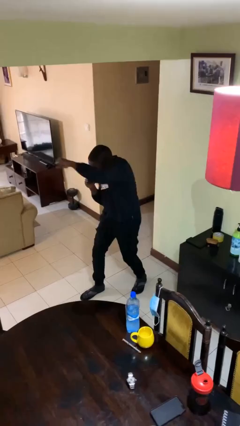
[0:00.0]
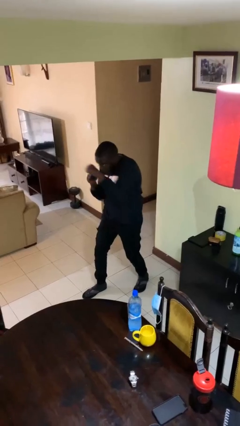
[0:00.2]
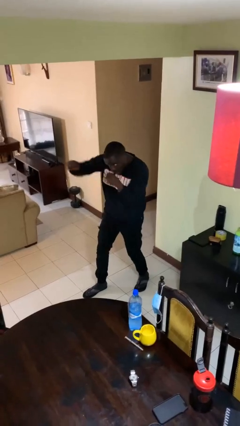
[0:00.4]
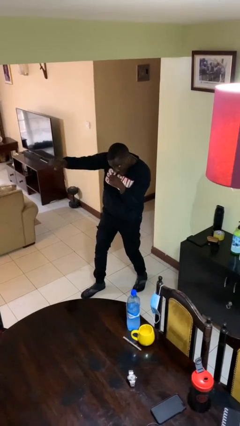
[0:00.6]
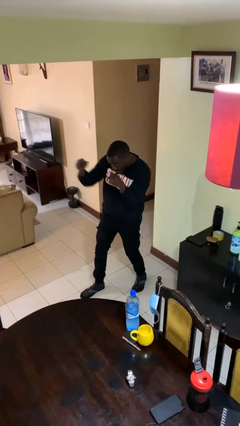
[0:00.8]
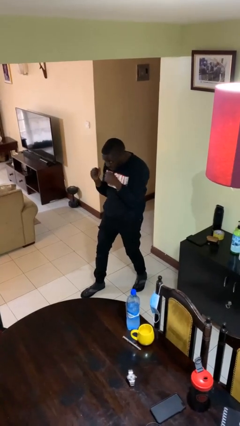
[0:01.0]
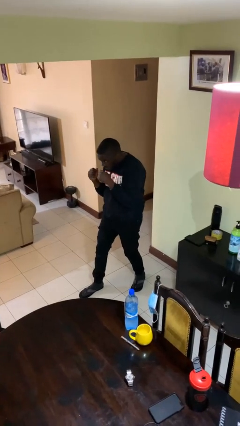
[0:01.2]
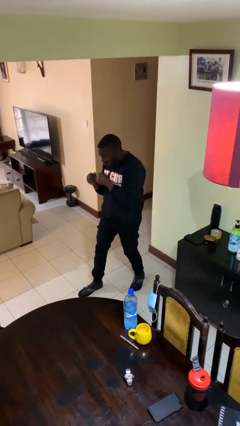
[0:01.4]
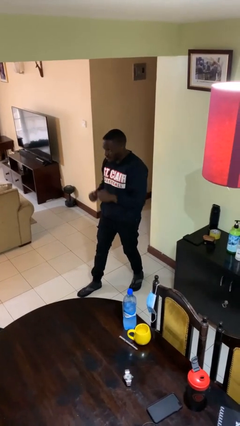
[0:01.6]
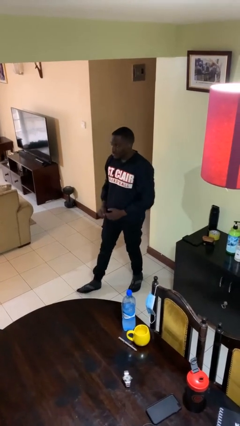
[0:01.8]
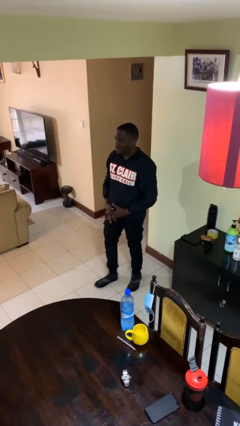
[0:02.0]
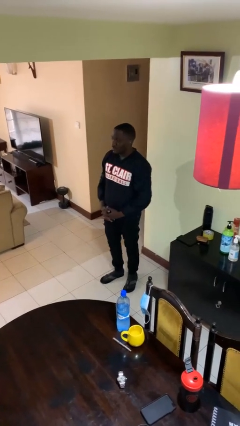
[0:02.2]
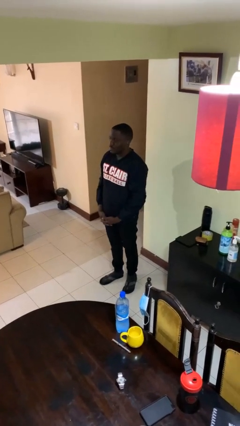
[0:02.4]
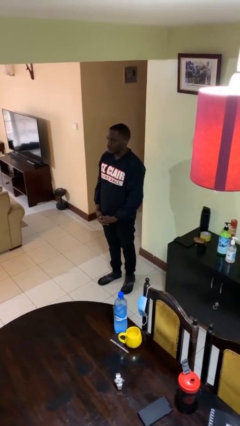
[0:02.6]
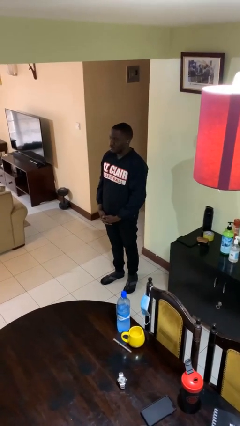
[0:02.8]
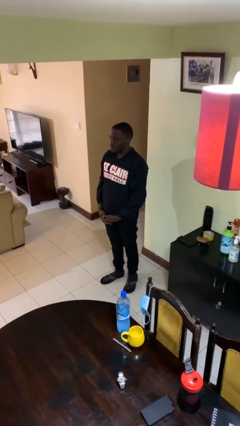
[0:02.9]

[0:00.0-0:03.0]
person punches

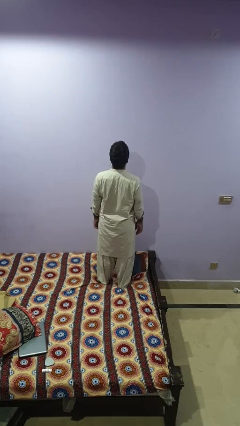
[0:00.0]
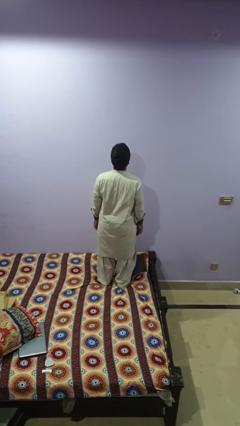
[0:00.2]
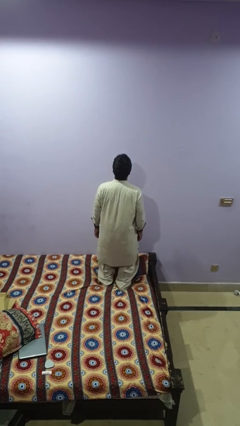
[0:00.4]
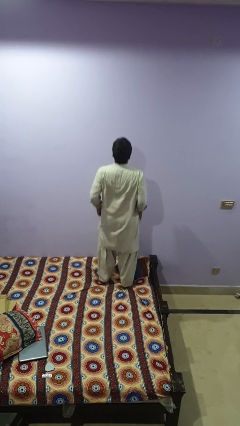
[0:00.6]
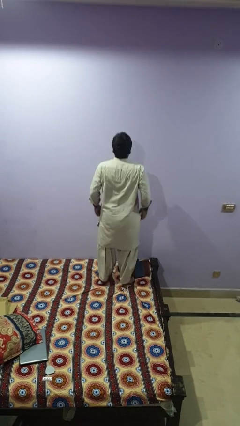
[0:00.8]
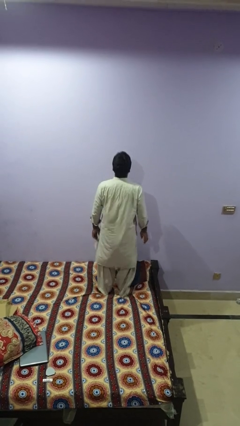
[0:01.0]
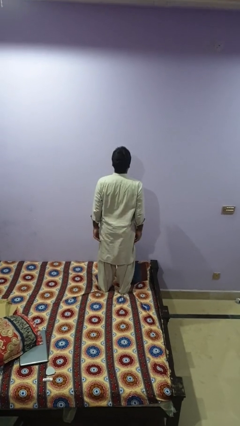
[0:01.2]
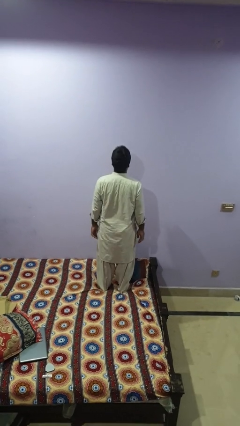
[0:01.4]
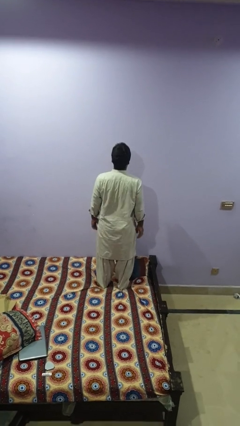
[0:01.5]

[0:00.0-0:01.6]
person jumps on bed

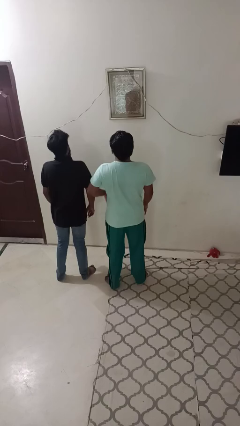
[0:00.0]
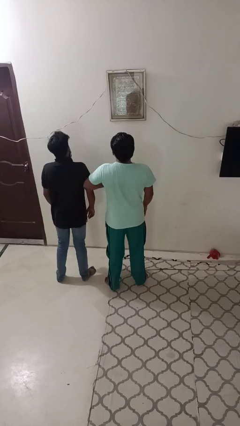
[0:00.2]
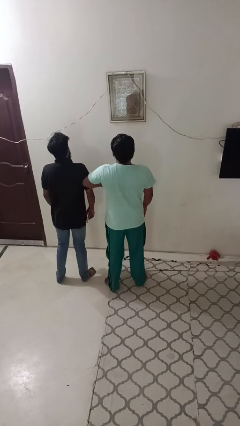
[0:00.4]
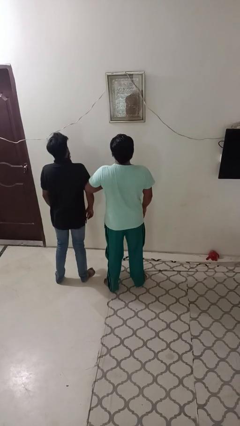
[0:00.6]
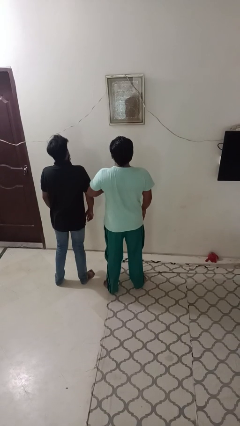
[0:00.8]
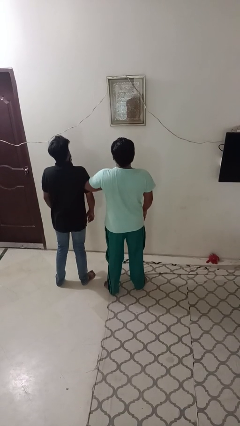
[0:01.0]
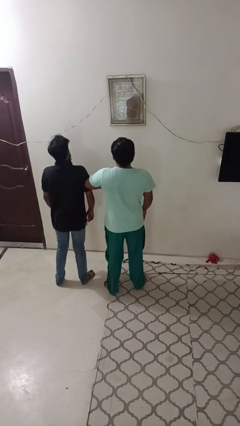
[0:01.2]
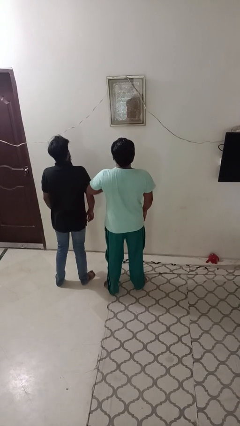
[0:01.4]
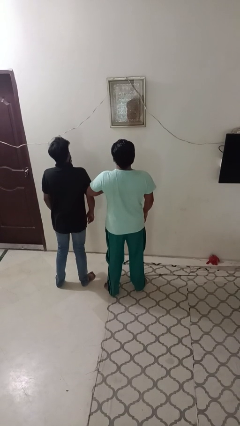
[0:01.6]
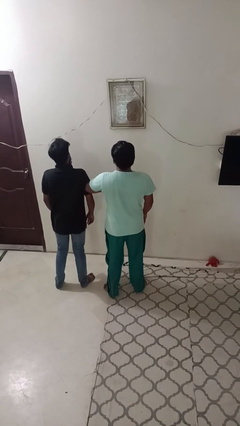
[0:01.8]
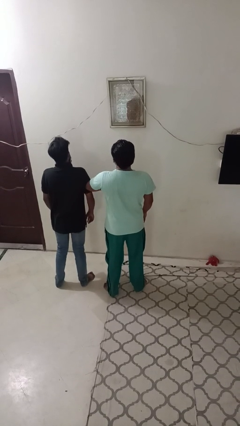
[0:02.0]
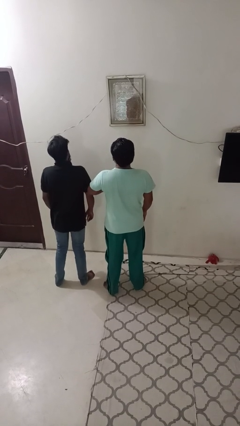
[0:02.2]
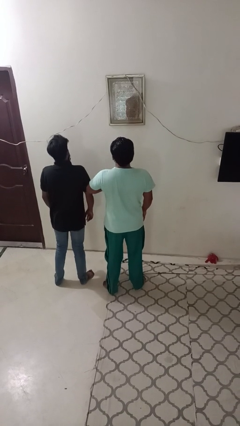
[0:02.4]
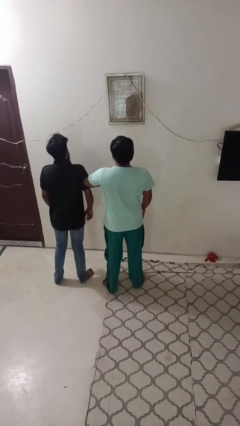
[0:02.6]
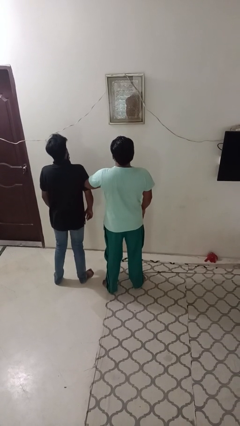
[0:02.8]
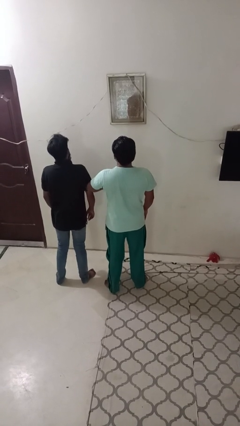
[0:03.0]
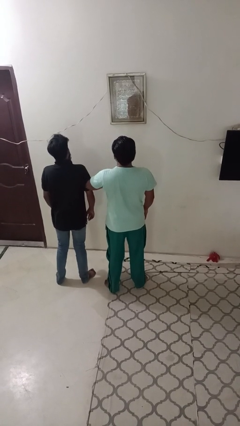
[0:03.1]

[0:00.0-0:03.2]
person nudges person with elbow

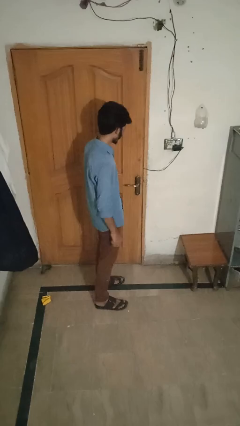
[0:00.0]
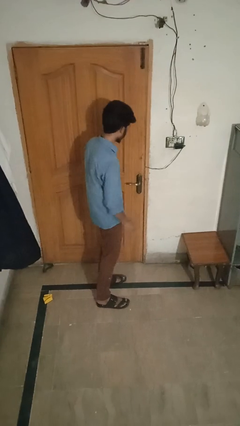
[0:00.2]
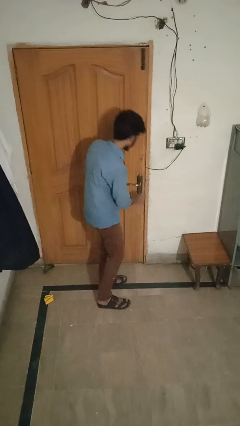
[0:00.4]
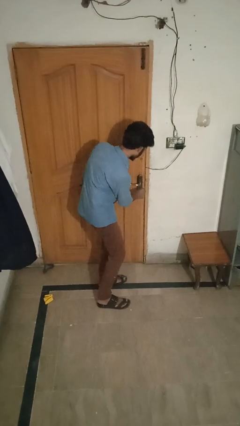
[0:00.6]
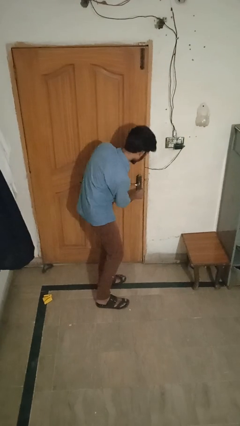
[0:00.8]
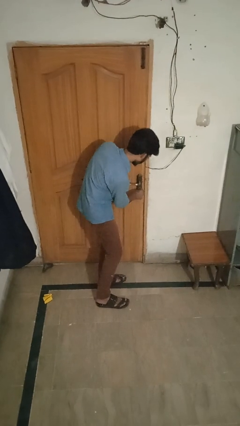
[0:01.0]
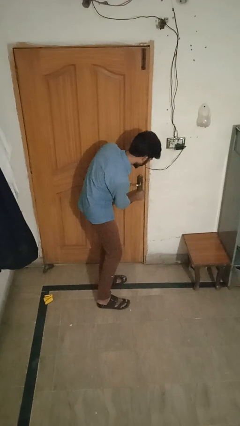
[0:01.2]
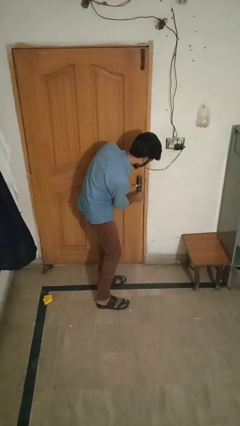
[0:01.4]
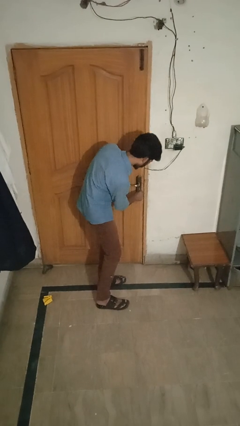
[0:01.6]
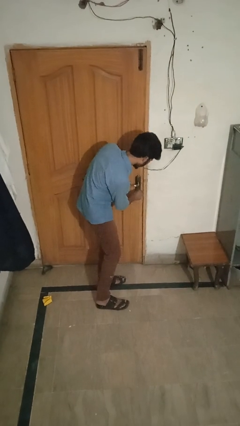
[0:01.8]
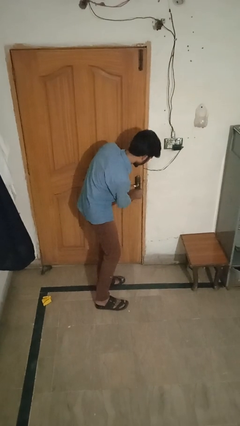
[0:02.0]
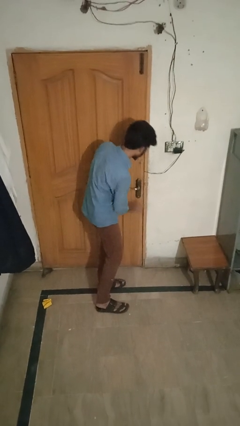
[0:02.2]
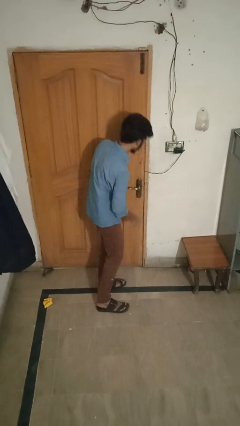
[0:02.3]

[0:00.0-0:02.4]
person locks door with keys

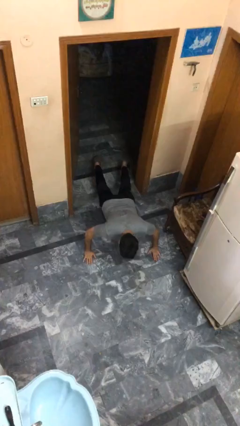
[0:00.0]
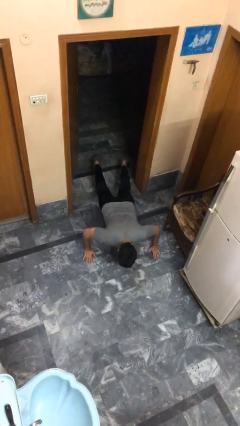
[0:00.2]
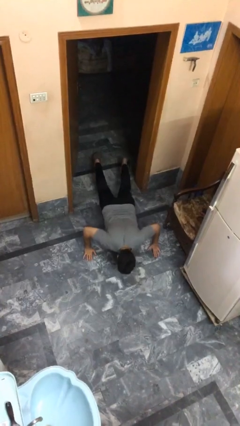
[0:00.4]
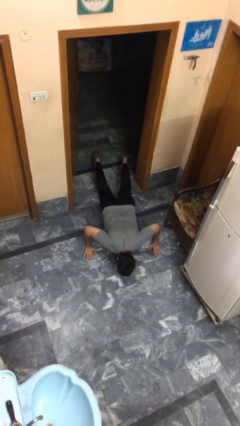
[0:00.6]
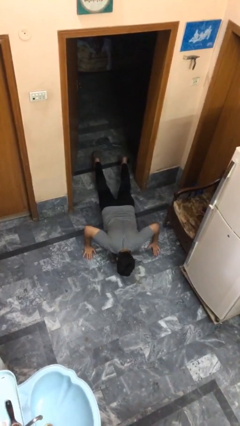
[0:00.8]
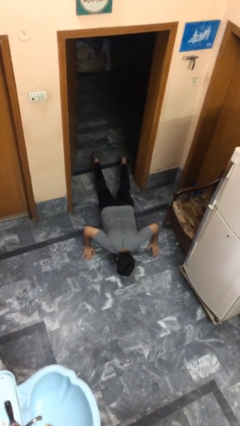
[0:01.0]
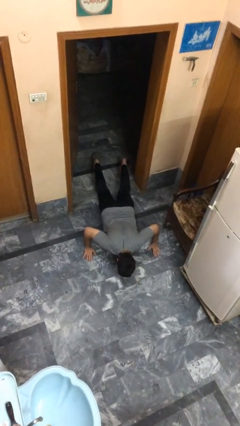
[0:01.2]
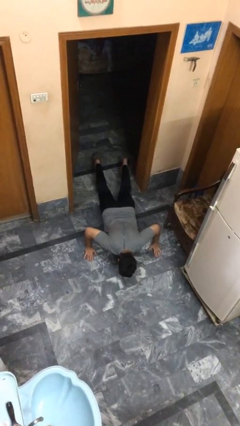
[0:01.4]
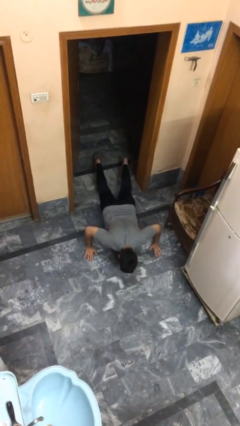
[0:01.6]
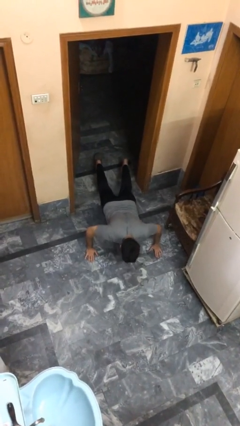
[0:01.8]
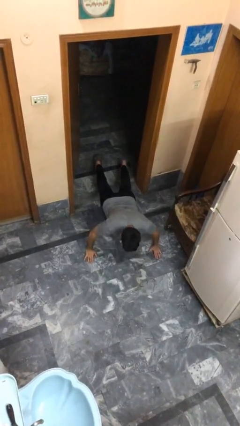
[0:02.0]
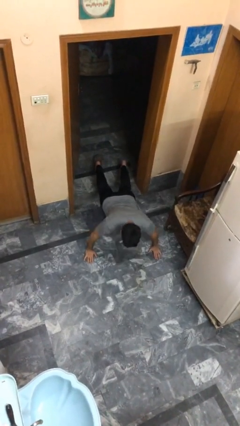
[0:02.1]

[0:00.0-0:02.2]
person exercises with pushup

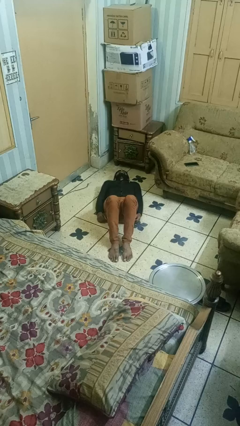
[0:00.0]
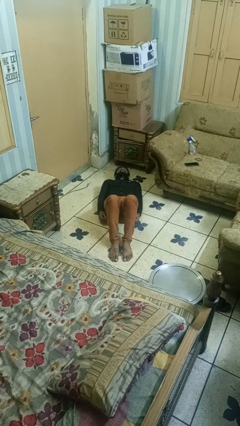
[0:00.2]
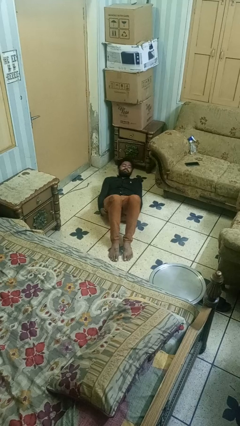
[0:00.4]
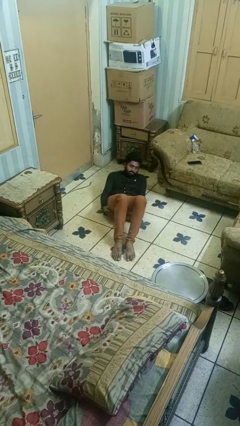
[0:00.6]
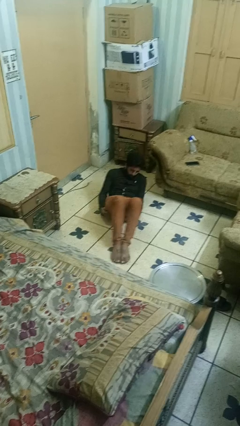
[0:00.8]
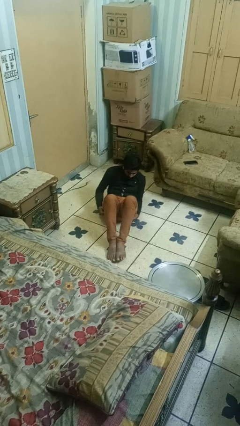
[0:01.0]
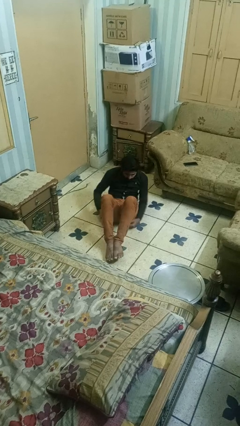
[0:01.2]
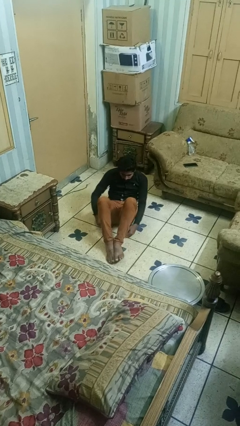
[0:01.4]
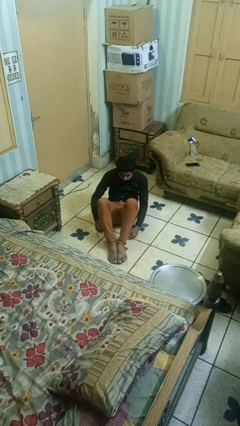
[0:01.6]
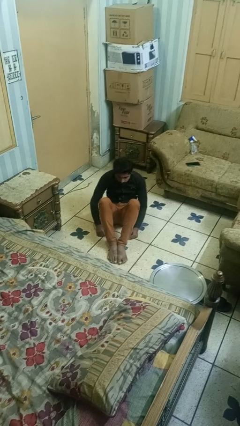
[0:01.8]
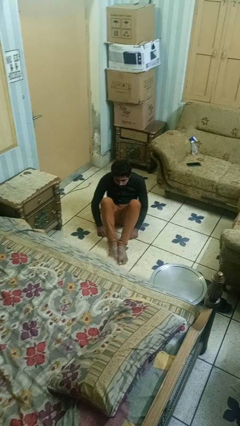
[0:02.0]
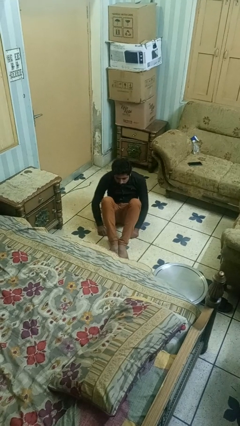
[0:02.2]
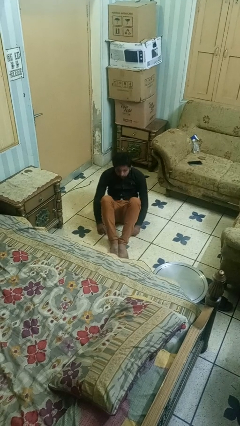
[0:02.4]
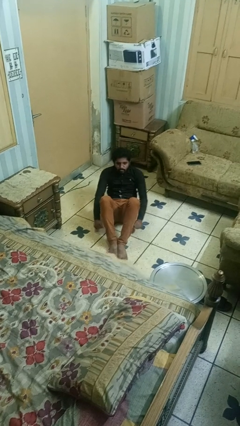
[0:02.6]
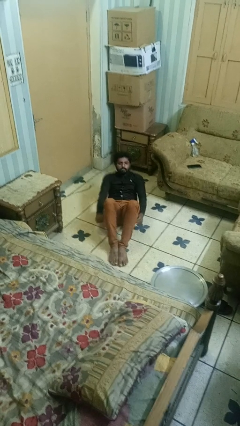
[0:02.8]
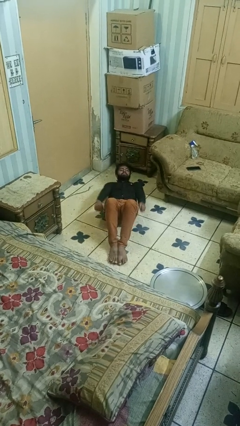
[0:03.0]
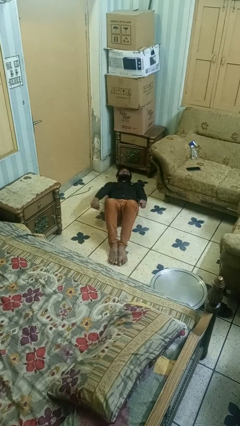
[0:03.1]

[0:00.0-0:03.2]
person exercises with situp

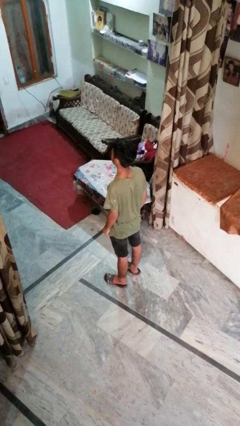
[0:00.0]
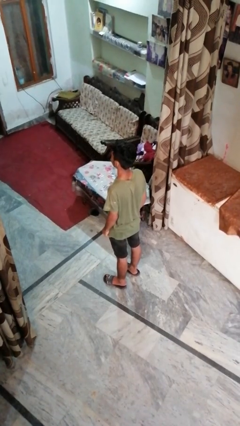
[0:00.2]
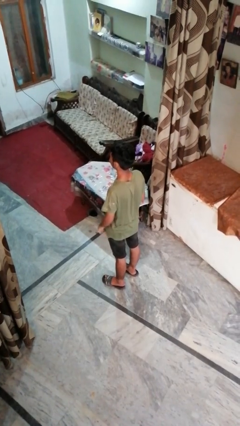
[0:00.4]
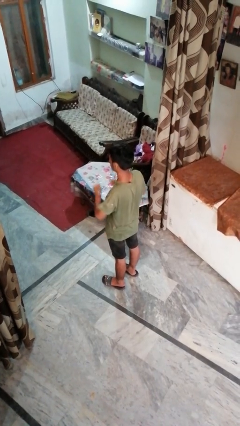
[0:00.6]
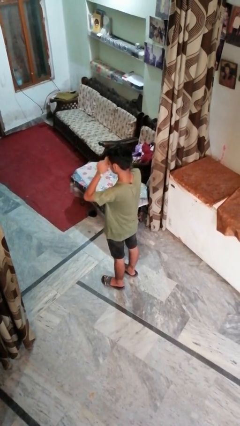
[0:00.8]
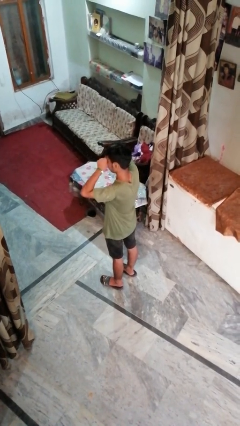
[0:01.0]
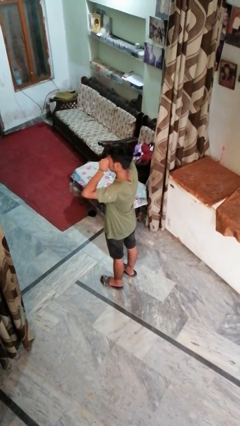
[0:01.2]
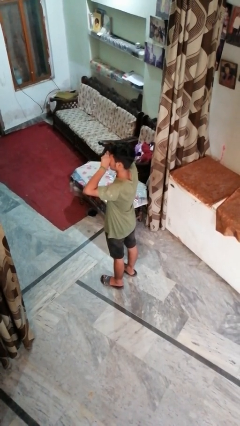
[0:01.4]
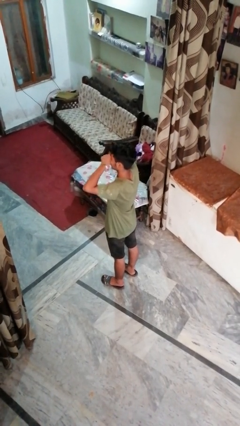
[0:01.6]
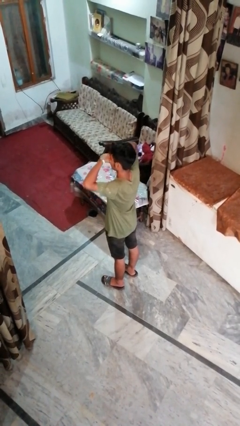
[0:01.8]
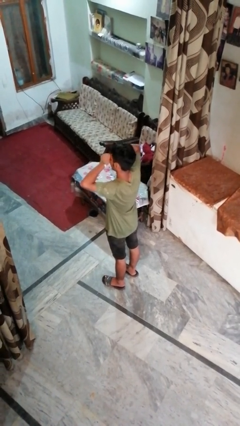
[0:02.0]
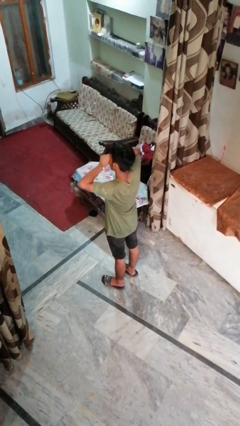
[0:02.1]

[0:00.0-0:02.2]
person rubs eyes
